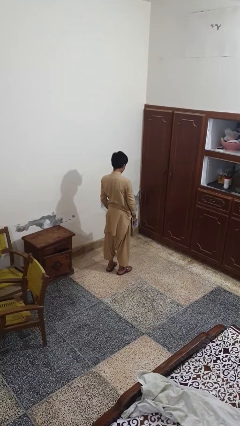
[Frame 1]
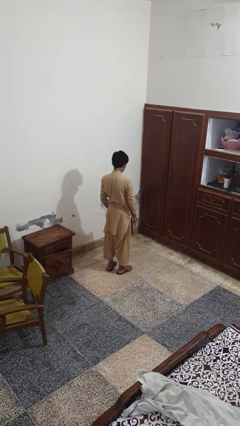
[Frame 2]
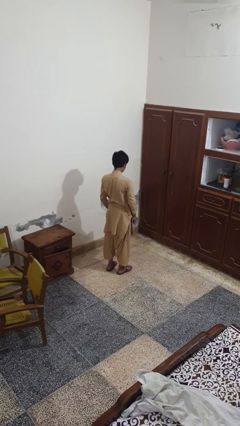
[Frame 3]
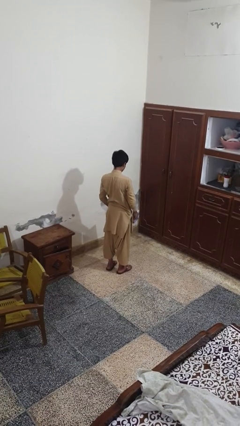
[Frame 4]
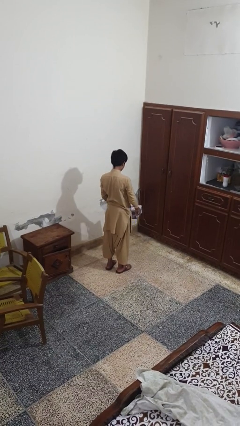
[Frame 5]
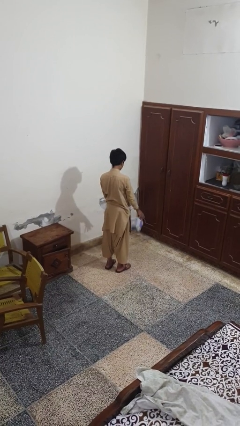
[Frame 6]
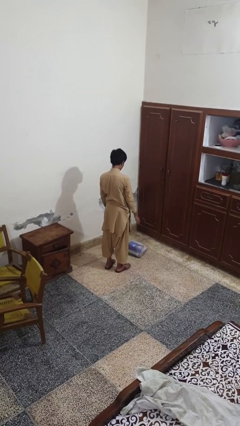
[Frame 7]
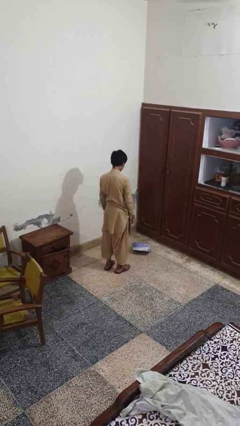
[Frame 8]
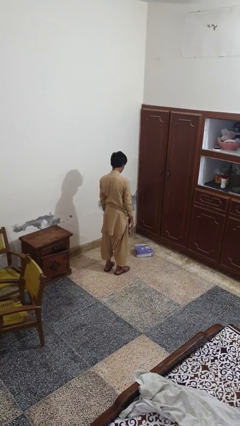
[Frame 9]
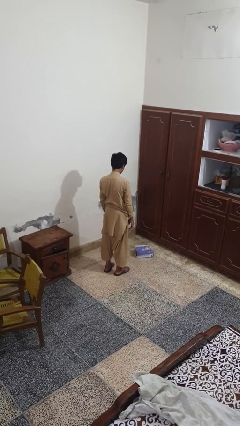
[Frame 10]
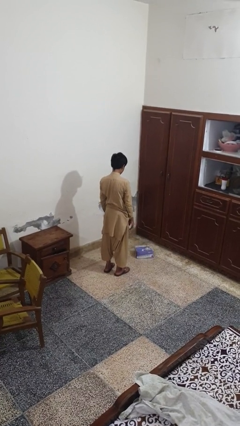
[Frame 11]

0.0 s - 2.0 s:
person throws object to ground

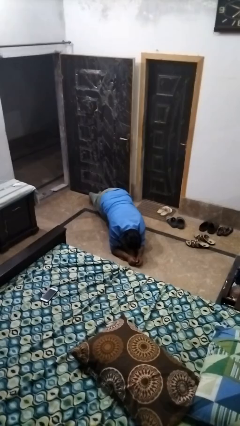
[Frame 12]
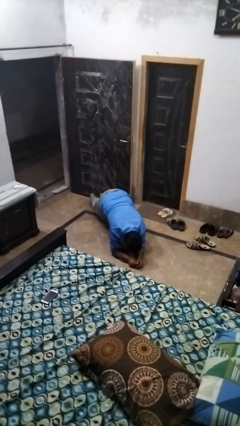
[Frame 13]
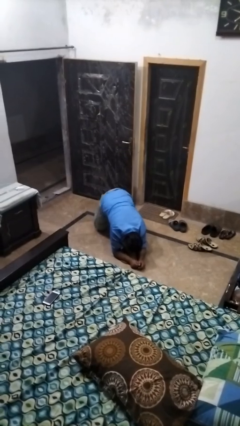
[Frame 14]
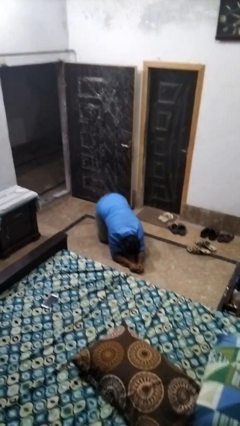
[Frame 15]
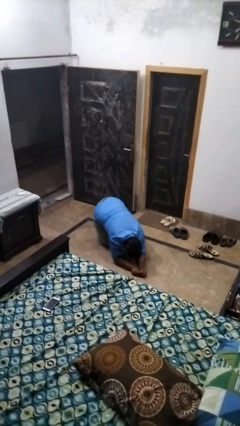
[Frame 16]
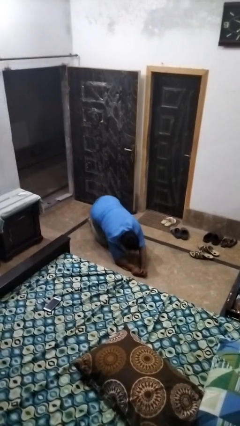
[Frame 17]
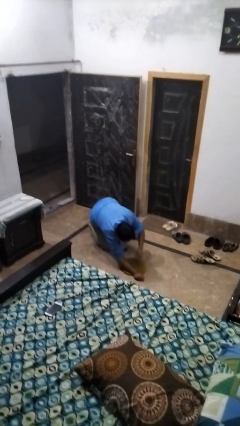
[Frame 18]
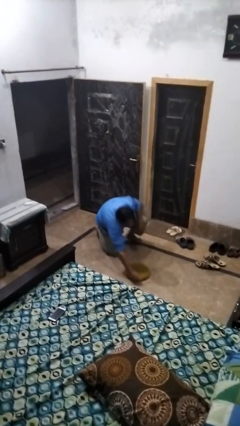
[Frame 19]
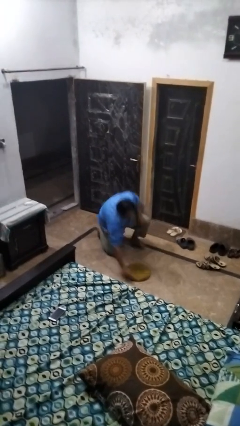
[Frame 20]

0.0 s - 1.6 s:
person stands up from floor

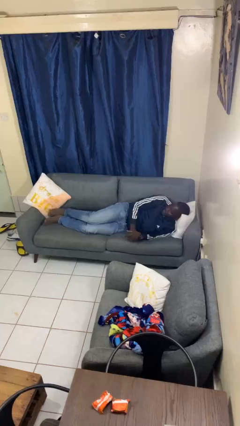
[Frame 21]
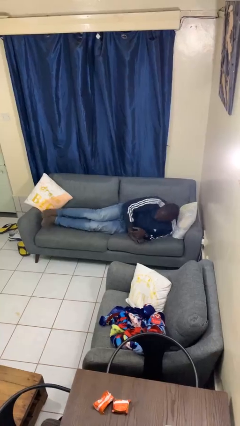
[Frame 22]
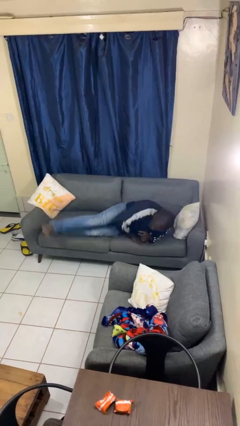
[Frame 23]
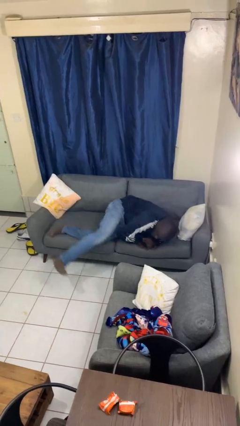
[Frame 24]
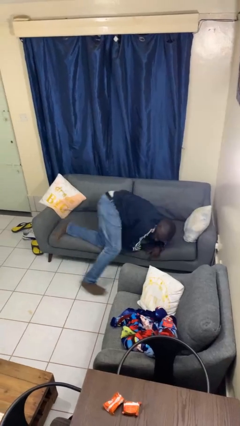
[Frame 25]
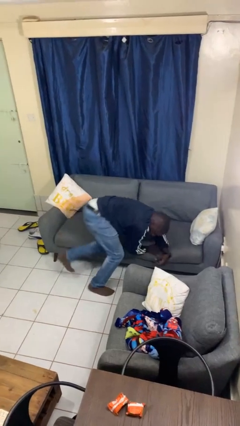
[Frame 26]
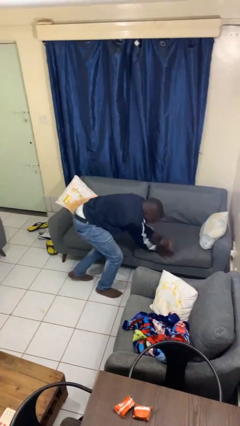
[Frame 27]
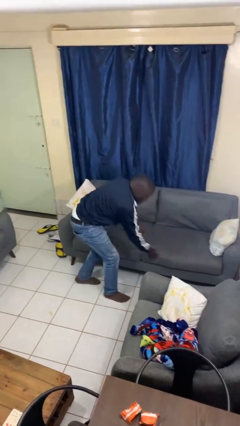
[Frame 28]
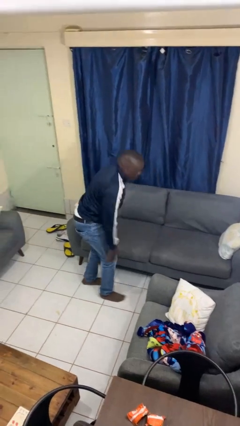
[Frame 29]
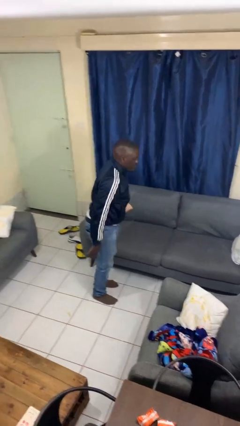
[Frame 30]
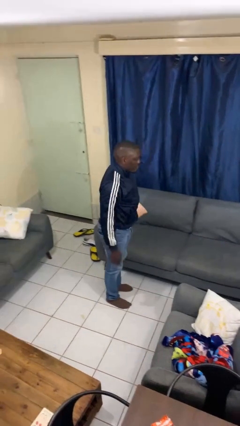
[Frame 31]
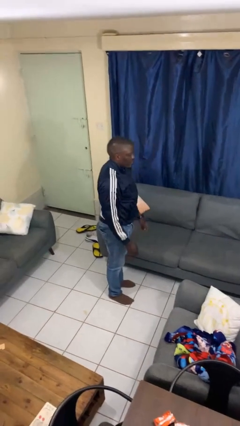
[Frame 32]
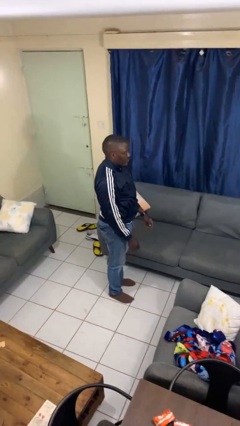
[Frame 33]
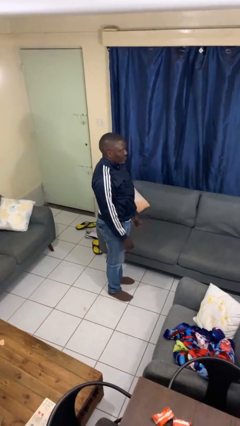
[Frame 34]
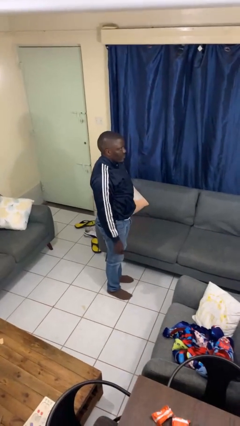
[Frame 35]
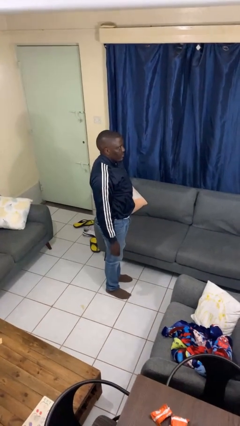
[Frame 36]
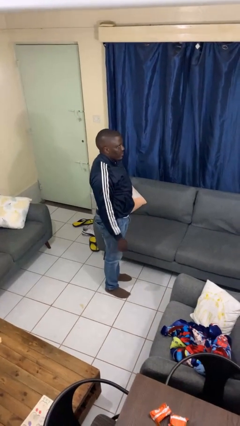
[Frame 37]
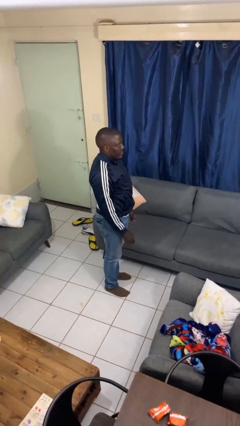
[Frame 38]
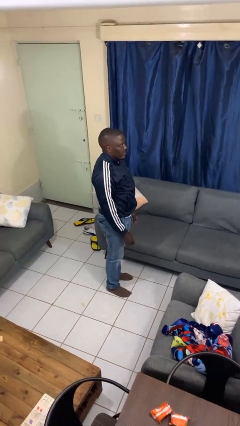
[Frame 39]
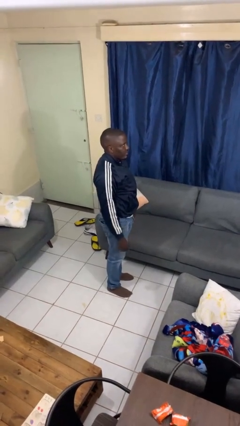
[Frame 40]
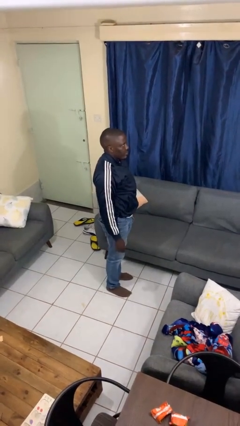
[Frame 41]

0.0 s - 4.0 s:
person stands up

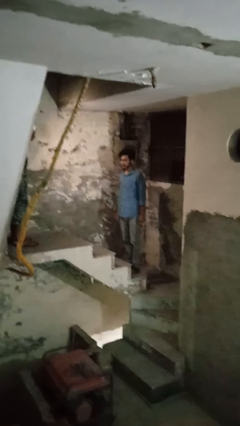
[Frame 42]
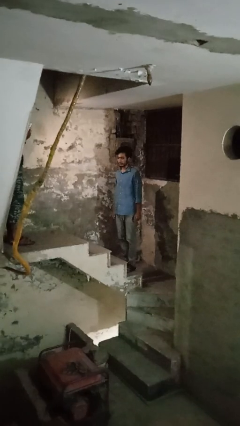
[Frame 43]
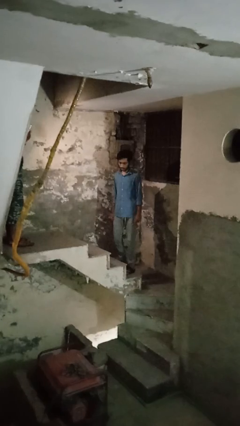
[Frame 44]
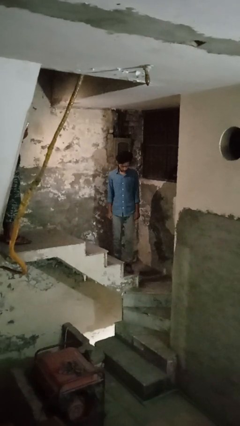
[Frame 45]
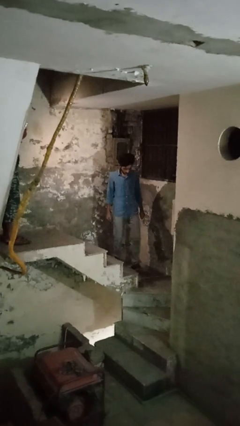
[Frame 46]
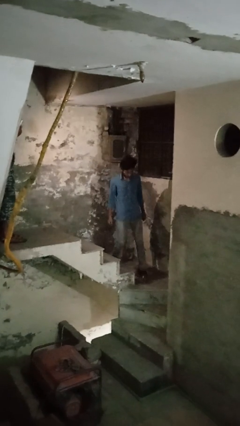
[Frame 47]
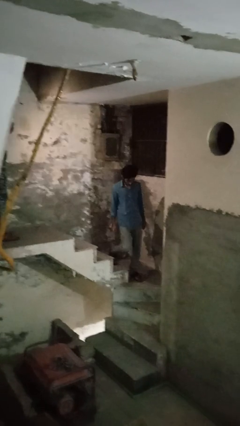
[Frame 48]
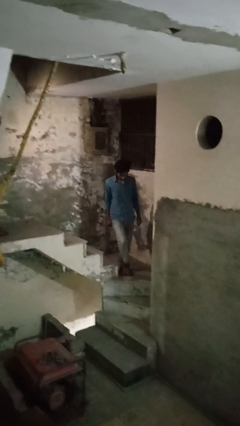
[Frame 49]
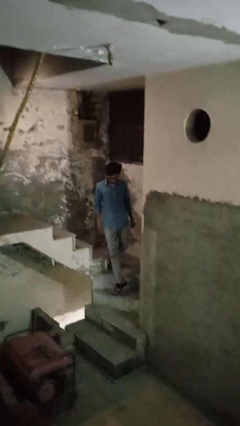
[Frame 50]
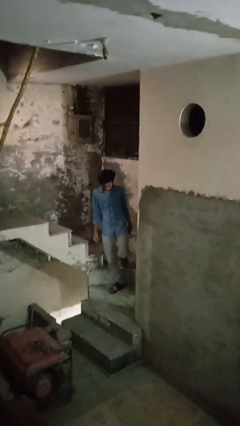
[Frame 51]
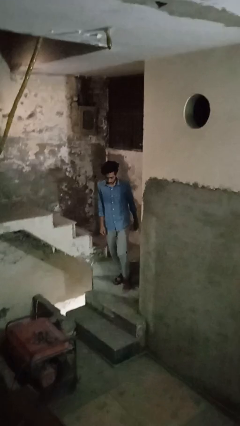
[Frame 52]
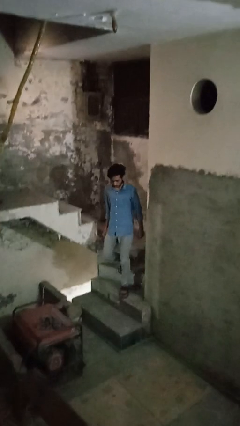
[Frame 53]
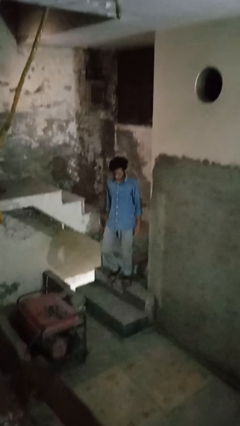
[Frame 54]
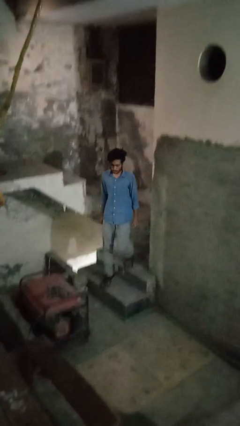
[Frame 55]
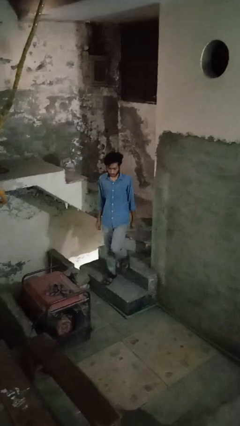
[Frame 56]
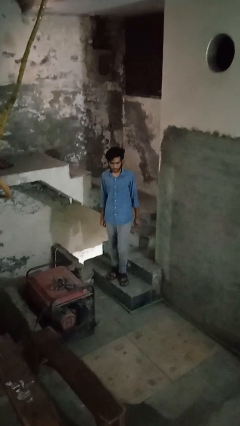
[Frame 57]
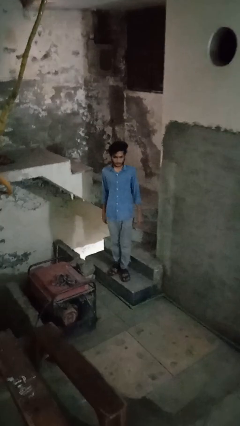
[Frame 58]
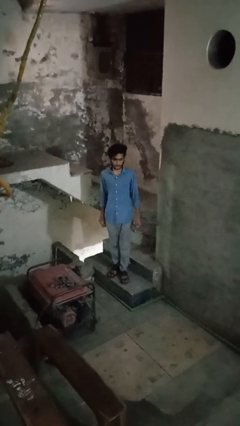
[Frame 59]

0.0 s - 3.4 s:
person climbs down stairs

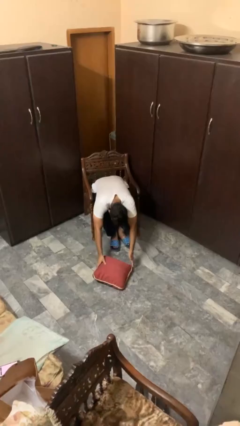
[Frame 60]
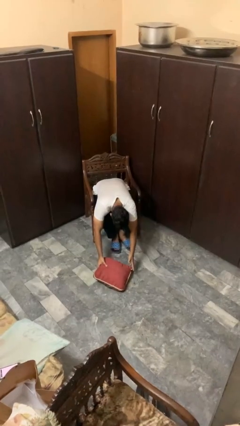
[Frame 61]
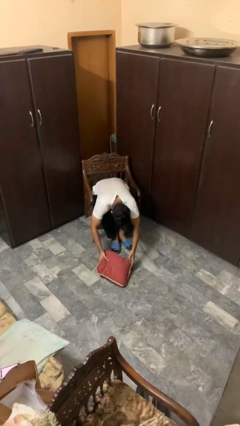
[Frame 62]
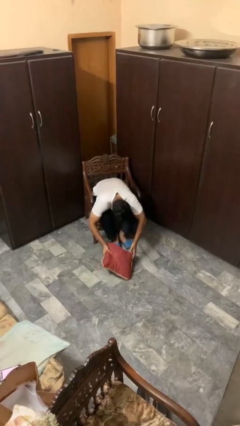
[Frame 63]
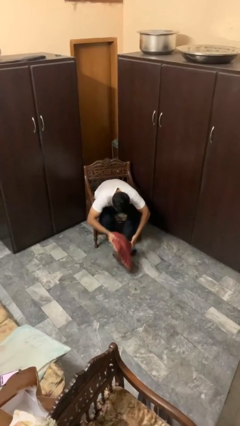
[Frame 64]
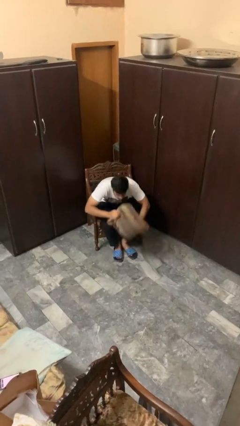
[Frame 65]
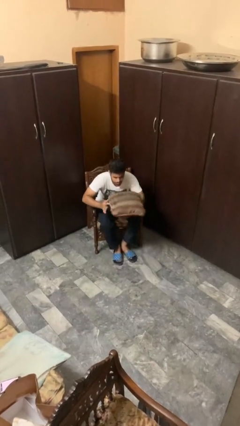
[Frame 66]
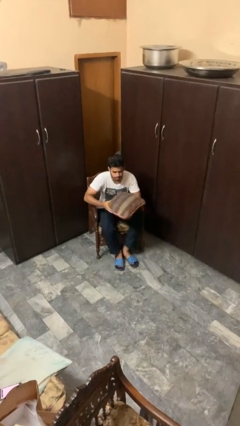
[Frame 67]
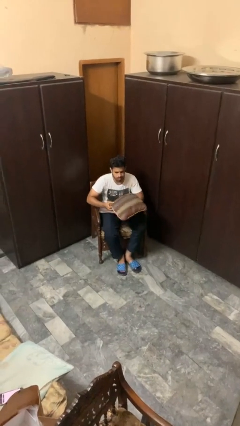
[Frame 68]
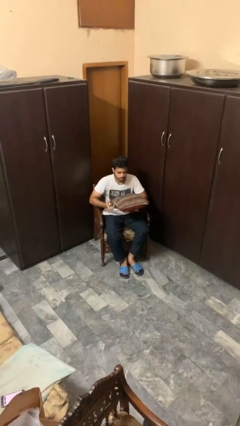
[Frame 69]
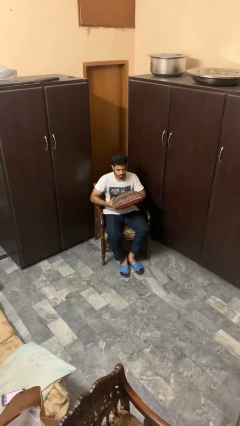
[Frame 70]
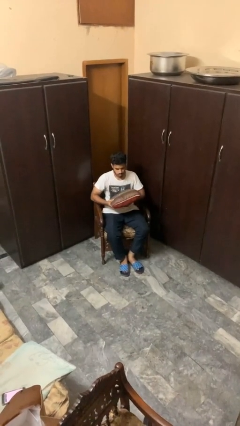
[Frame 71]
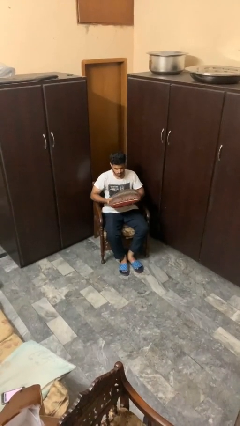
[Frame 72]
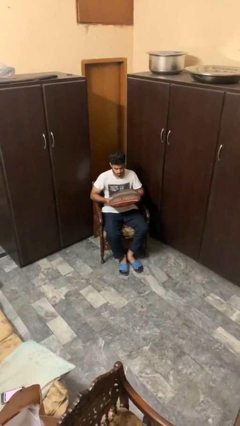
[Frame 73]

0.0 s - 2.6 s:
person picks up object from floor

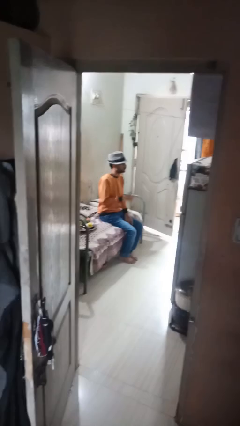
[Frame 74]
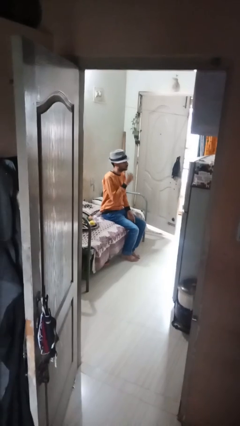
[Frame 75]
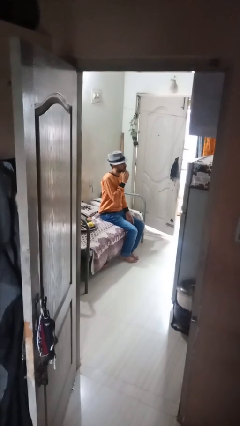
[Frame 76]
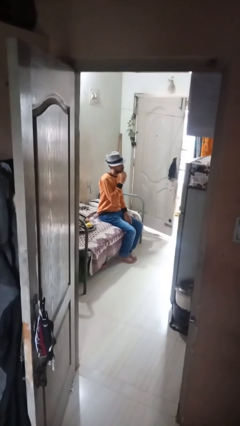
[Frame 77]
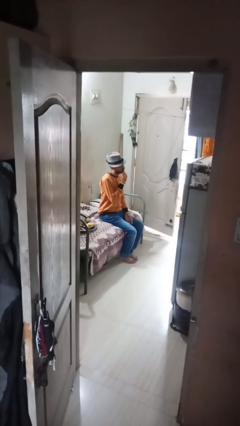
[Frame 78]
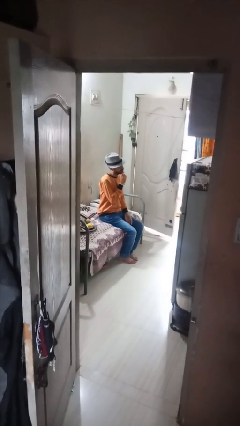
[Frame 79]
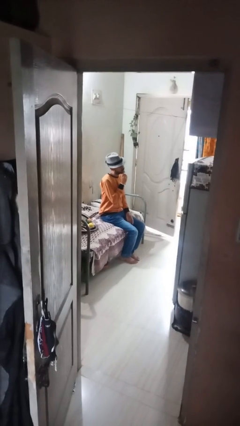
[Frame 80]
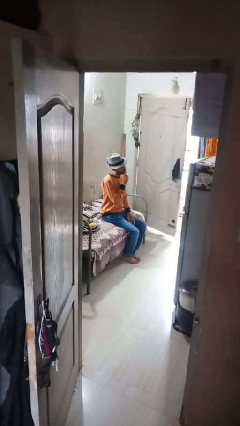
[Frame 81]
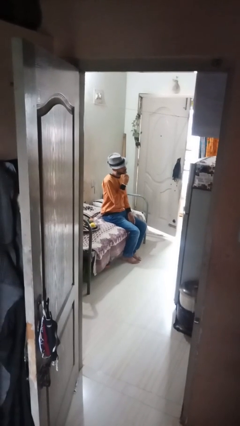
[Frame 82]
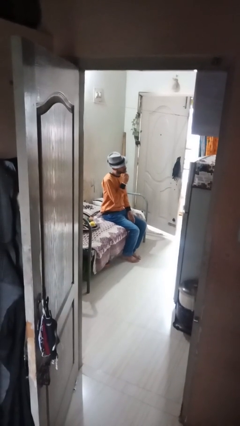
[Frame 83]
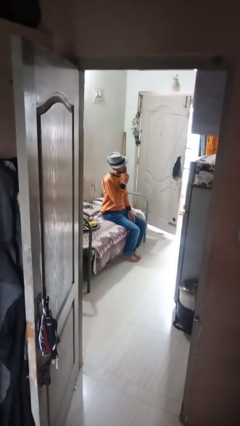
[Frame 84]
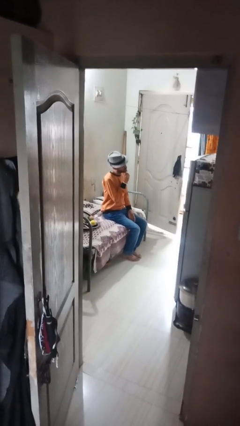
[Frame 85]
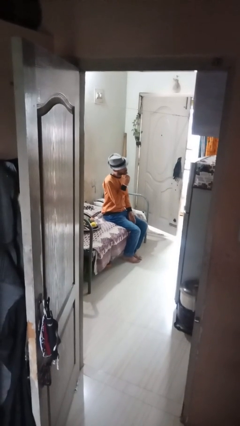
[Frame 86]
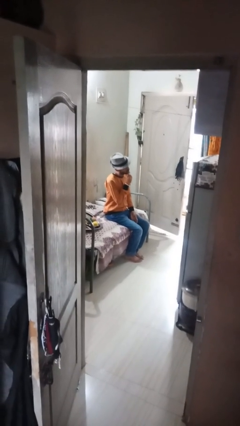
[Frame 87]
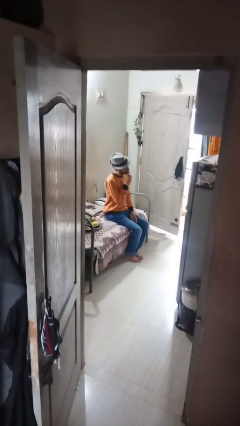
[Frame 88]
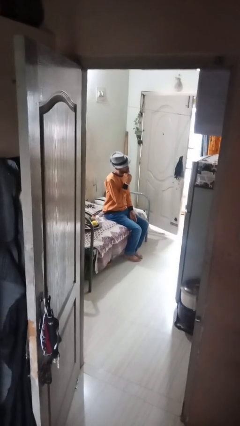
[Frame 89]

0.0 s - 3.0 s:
person strokes chin

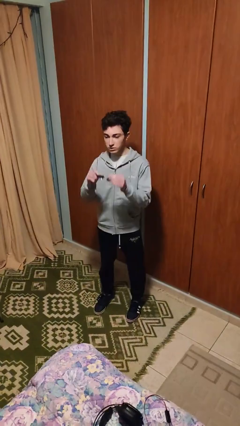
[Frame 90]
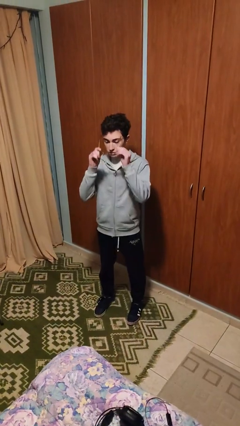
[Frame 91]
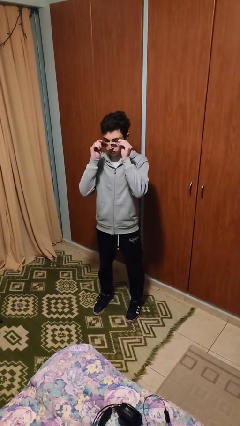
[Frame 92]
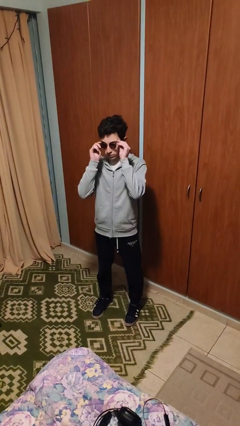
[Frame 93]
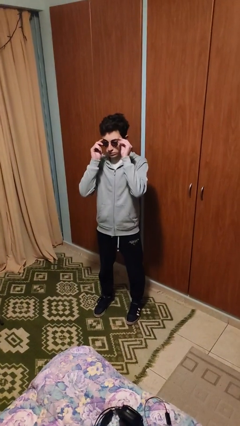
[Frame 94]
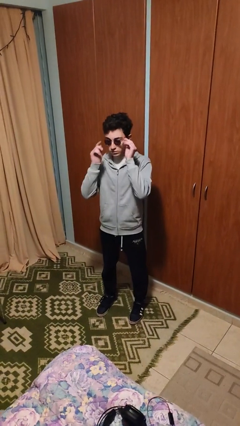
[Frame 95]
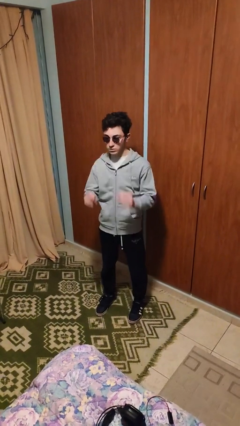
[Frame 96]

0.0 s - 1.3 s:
person puts on glasses
